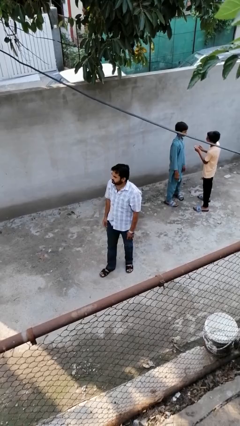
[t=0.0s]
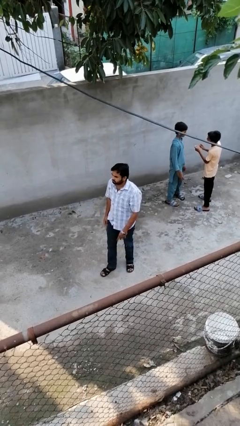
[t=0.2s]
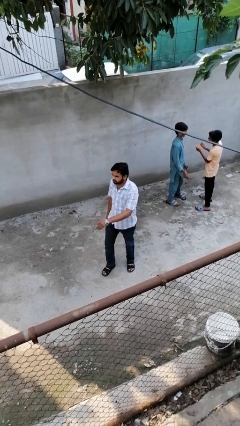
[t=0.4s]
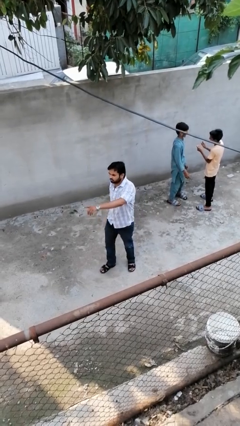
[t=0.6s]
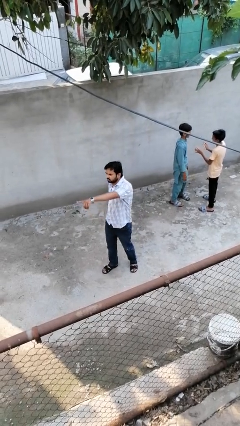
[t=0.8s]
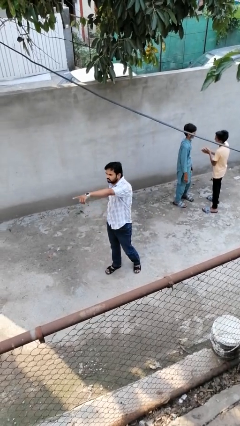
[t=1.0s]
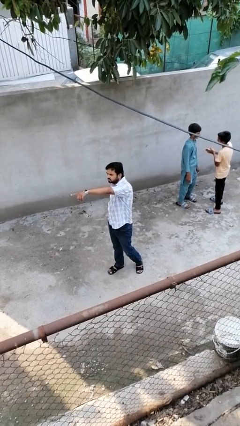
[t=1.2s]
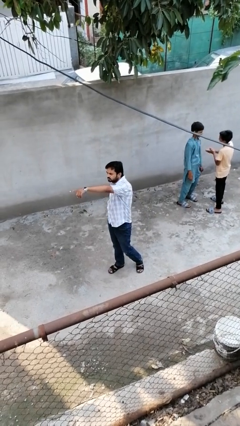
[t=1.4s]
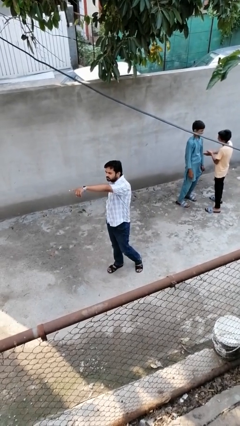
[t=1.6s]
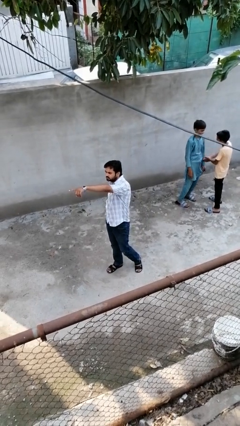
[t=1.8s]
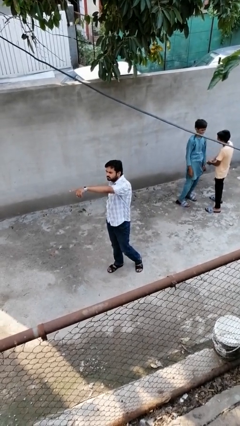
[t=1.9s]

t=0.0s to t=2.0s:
person points at person

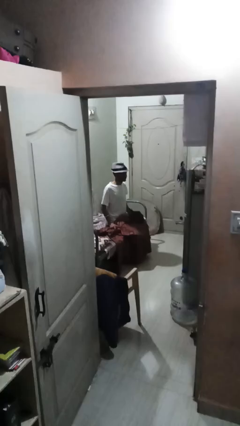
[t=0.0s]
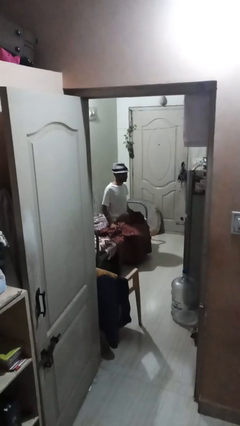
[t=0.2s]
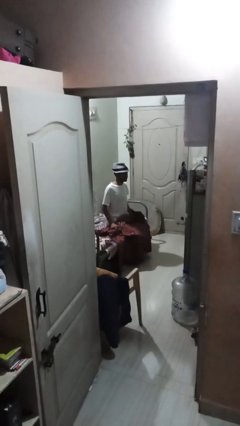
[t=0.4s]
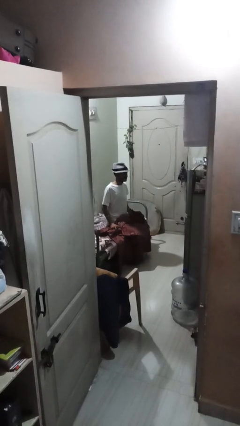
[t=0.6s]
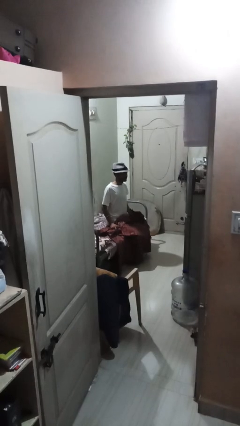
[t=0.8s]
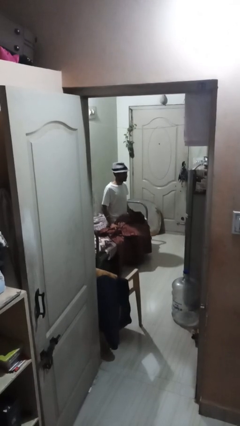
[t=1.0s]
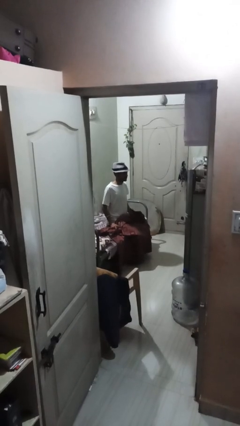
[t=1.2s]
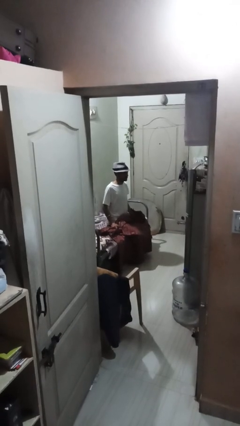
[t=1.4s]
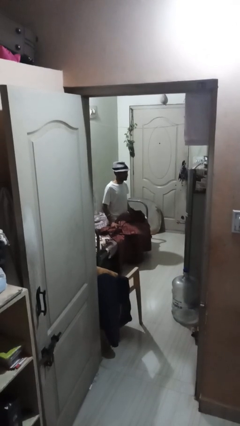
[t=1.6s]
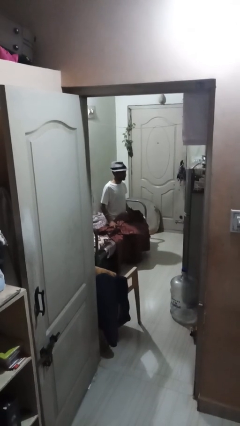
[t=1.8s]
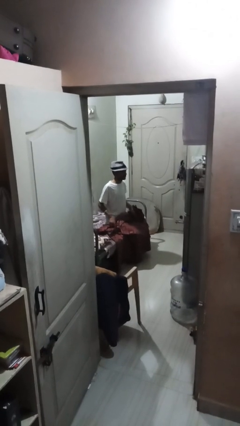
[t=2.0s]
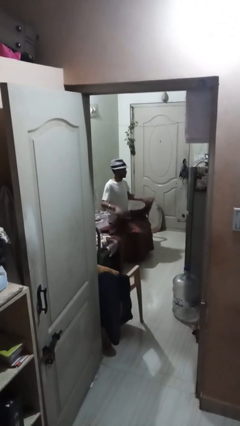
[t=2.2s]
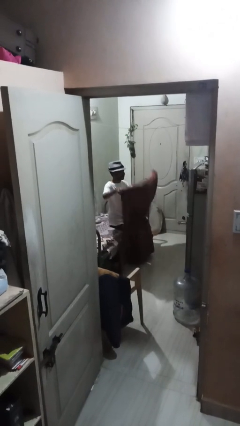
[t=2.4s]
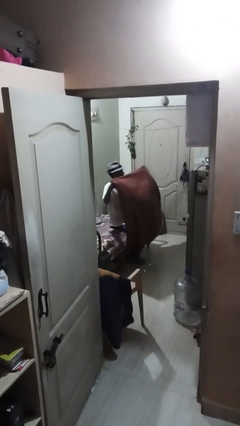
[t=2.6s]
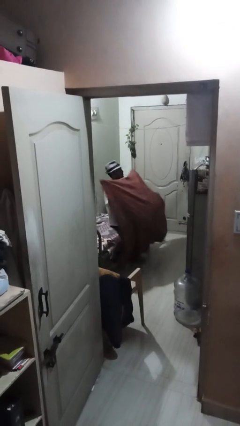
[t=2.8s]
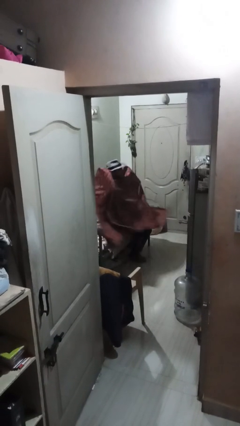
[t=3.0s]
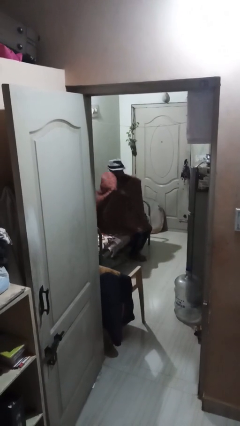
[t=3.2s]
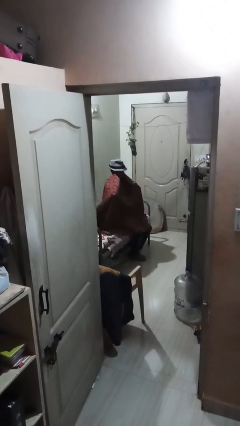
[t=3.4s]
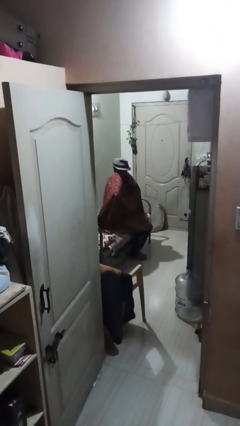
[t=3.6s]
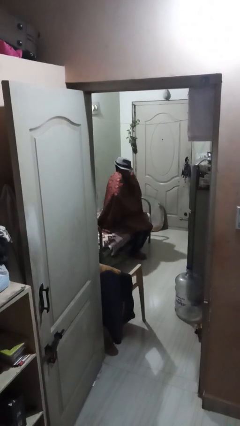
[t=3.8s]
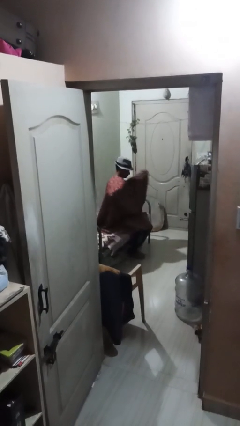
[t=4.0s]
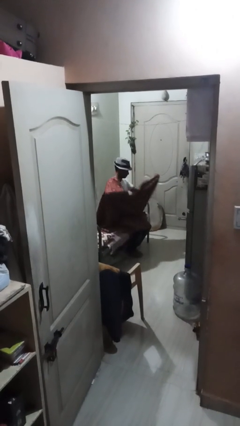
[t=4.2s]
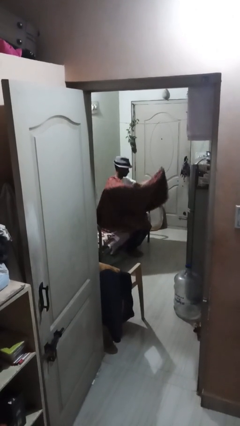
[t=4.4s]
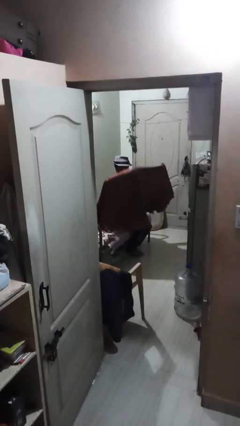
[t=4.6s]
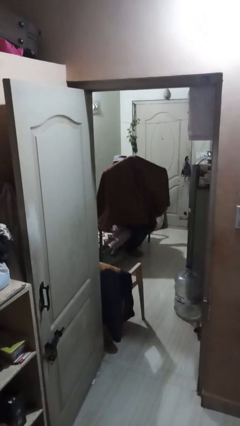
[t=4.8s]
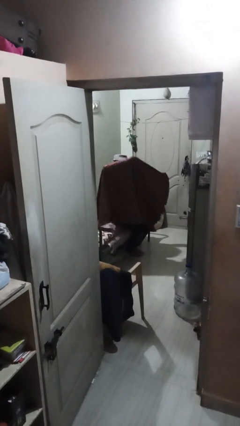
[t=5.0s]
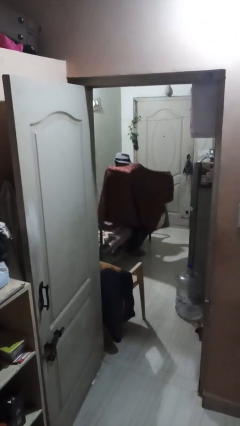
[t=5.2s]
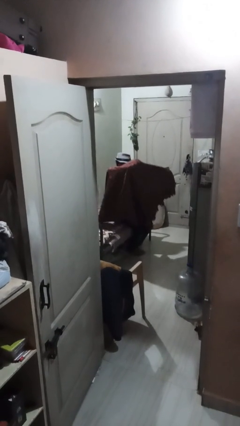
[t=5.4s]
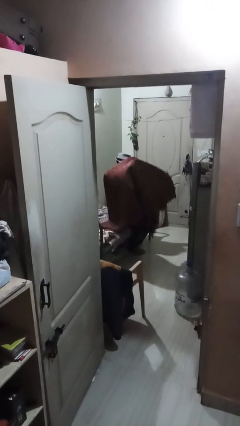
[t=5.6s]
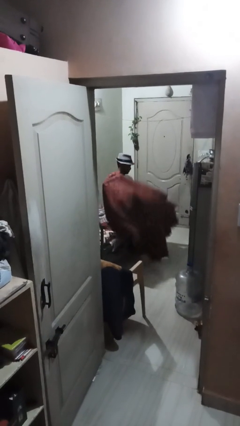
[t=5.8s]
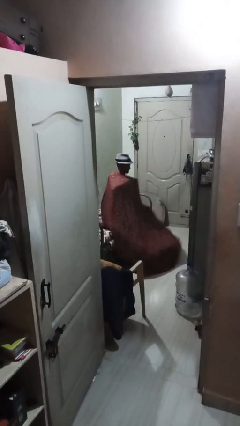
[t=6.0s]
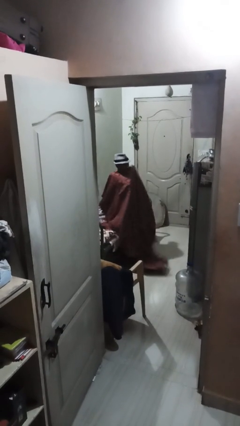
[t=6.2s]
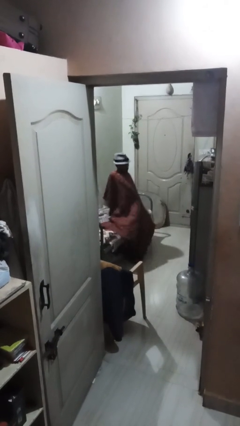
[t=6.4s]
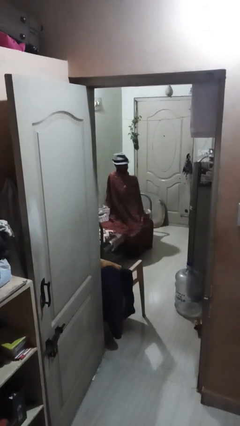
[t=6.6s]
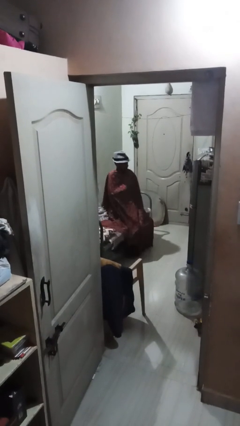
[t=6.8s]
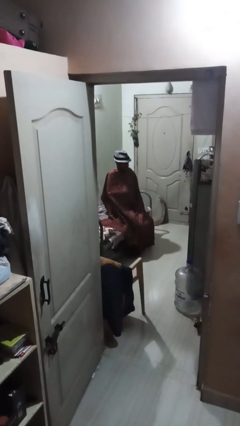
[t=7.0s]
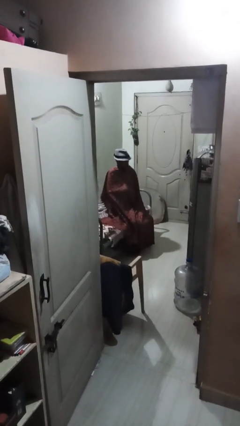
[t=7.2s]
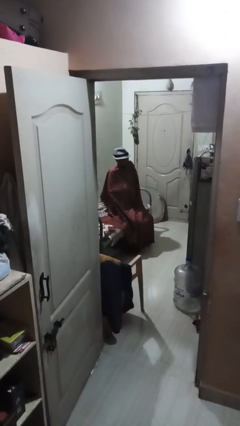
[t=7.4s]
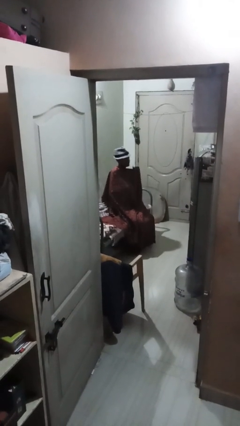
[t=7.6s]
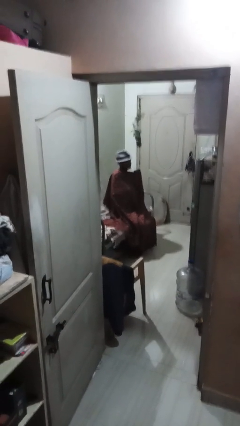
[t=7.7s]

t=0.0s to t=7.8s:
person covers with blanket

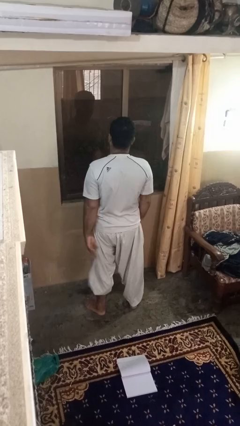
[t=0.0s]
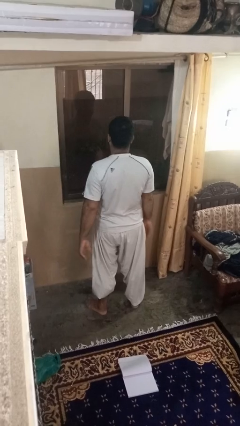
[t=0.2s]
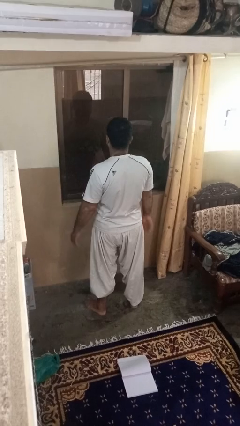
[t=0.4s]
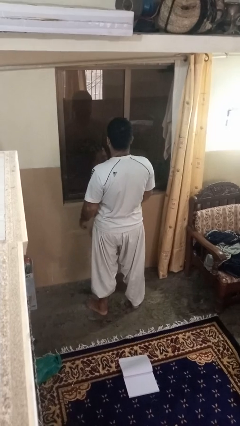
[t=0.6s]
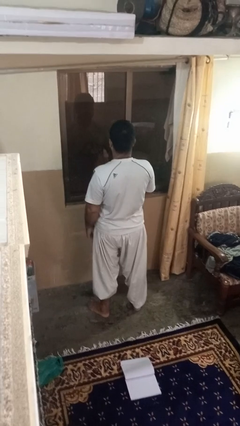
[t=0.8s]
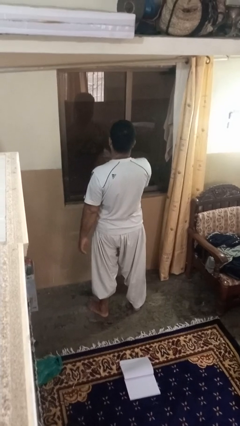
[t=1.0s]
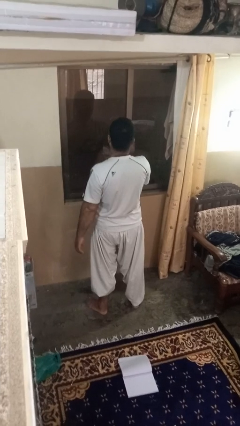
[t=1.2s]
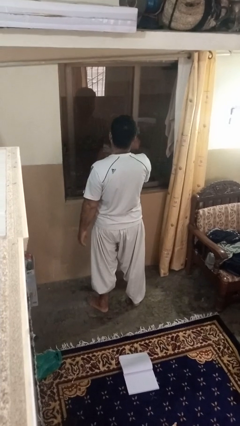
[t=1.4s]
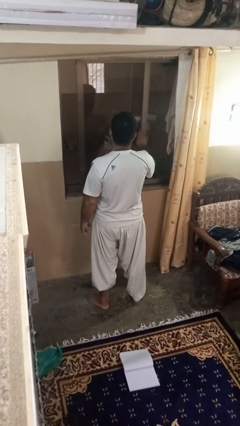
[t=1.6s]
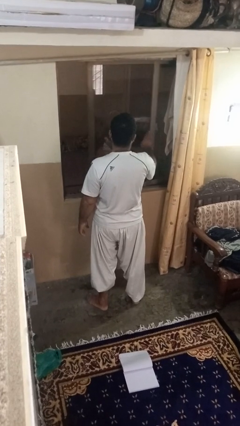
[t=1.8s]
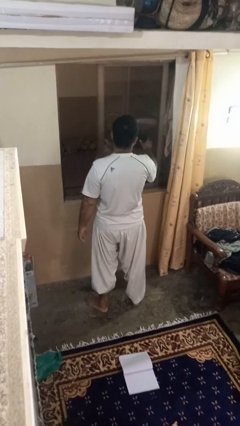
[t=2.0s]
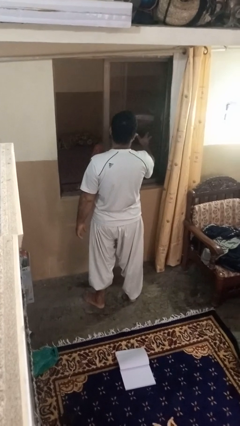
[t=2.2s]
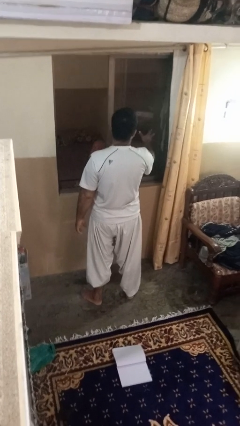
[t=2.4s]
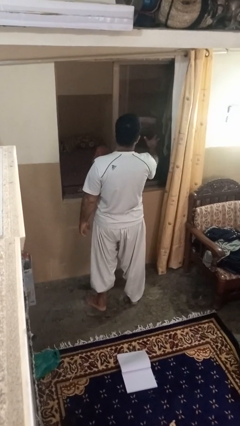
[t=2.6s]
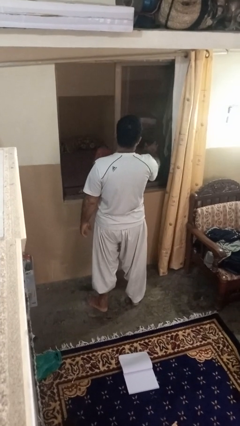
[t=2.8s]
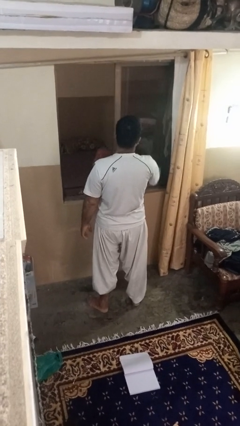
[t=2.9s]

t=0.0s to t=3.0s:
person opens home window

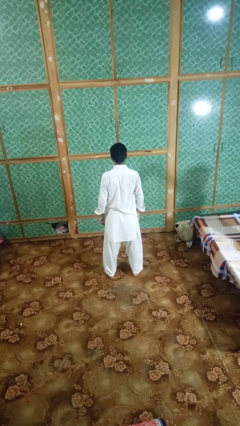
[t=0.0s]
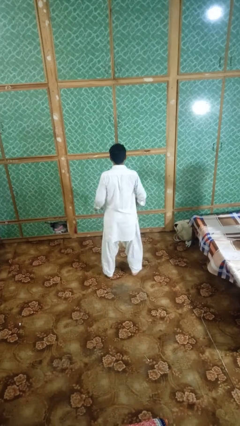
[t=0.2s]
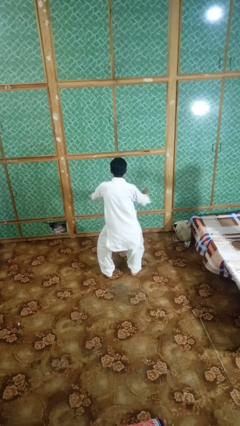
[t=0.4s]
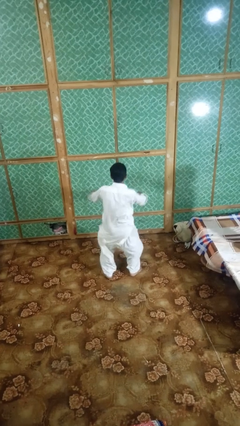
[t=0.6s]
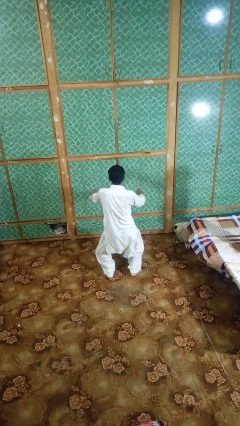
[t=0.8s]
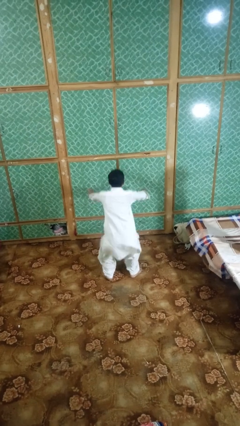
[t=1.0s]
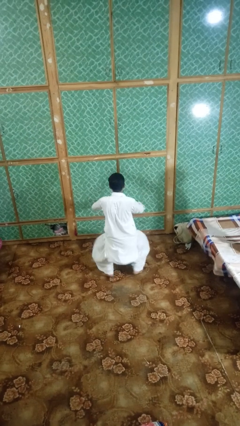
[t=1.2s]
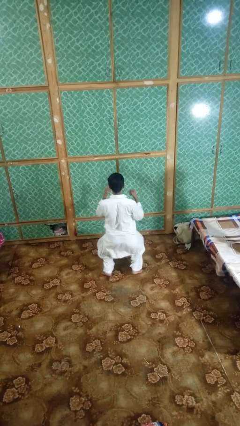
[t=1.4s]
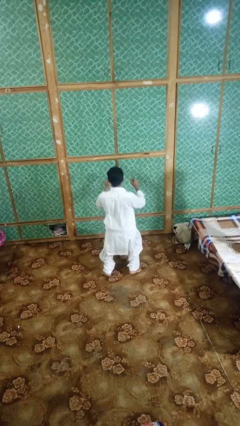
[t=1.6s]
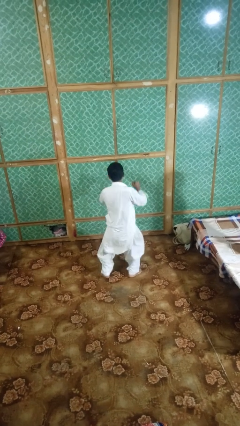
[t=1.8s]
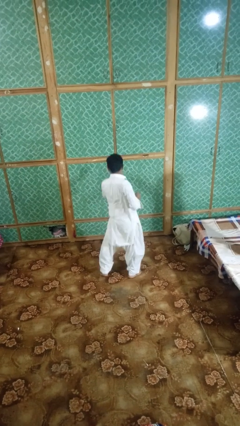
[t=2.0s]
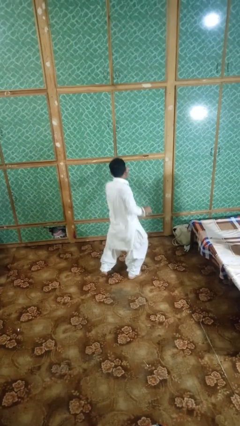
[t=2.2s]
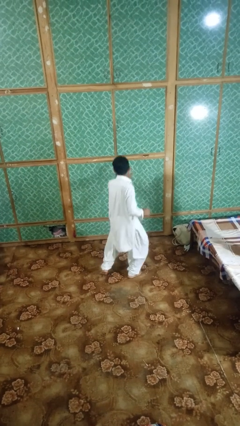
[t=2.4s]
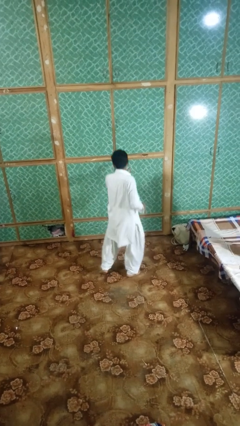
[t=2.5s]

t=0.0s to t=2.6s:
person dances in place

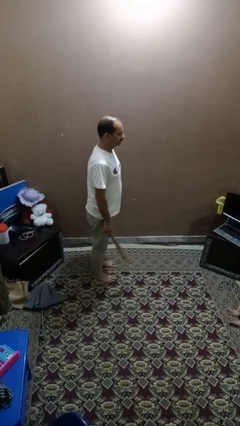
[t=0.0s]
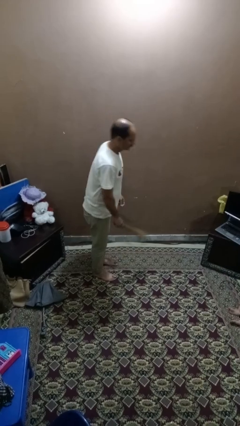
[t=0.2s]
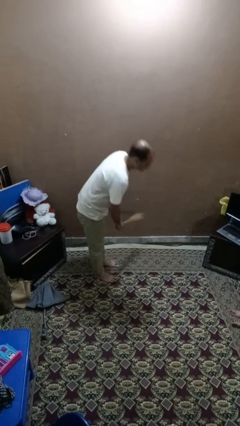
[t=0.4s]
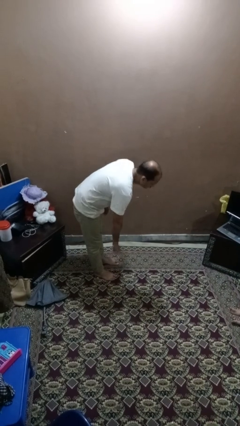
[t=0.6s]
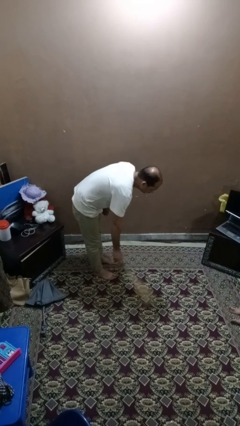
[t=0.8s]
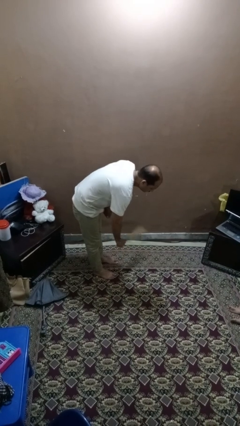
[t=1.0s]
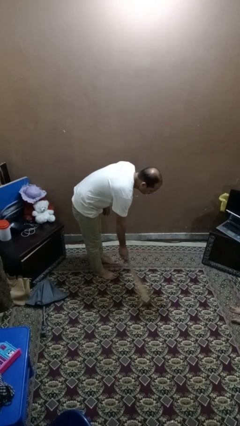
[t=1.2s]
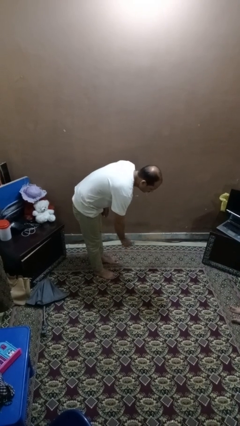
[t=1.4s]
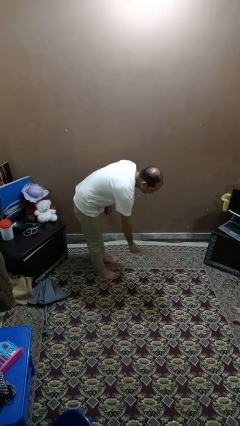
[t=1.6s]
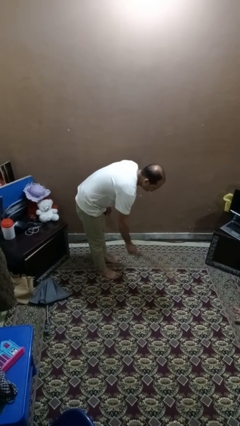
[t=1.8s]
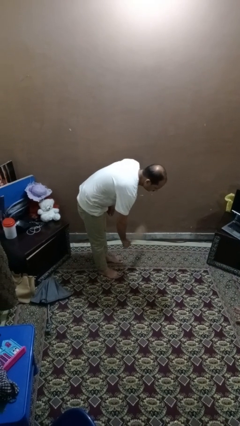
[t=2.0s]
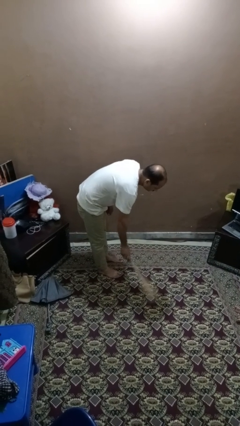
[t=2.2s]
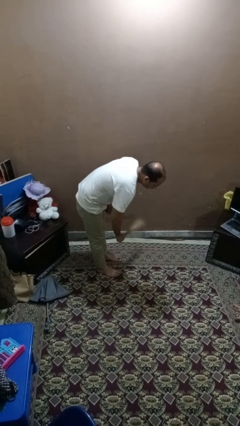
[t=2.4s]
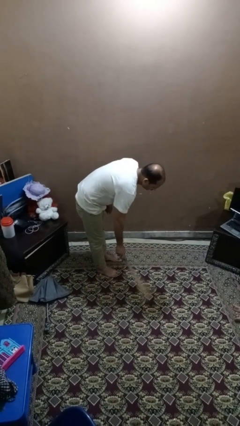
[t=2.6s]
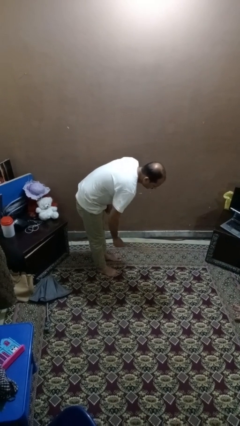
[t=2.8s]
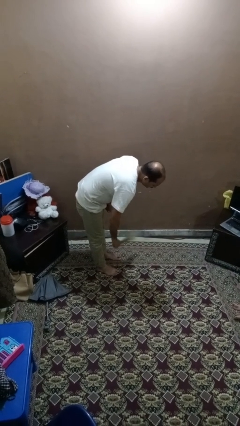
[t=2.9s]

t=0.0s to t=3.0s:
person sweeps floor
